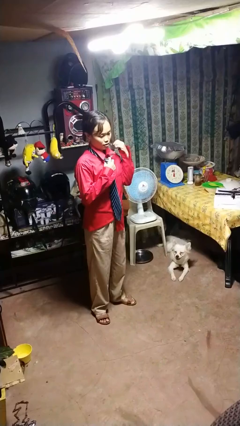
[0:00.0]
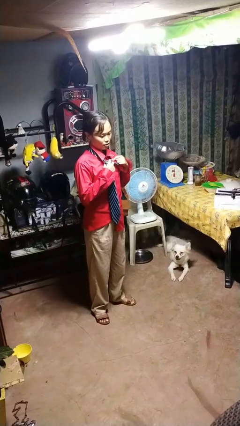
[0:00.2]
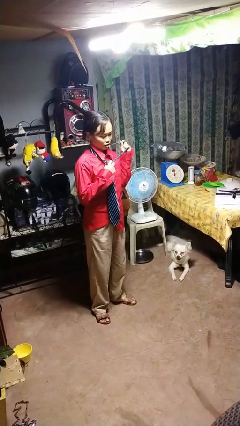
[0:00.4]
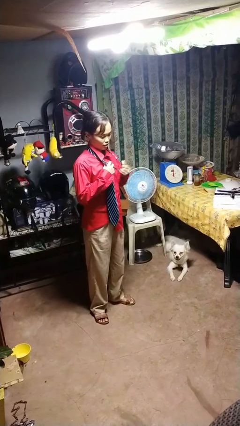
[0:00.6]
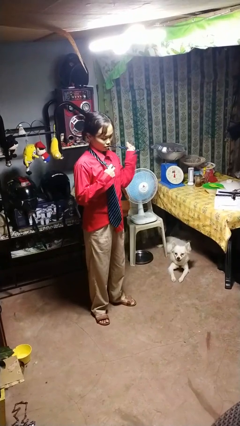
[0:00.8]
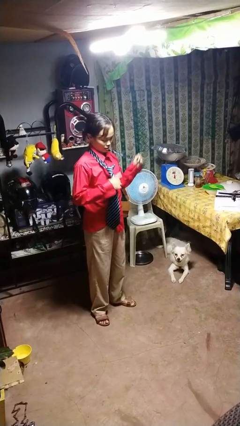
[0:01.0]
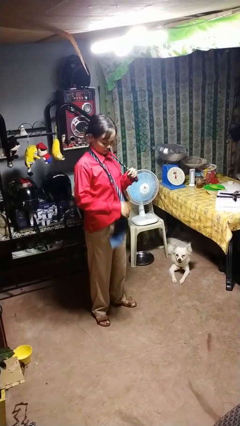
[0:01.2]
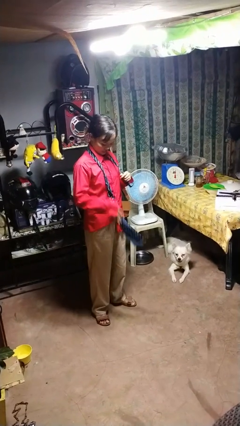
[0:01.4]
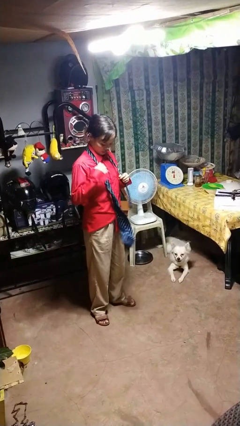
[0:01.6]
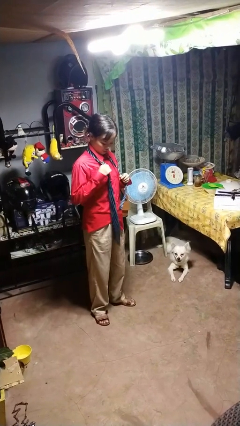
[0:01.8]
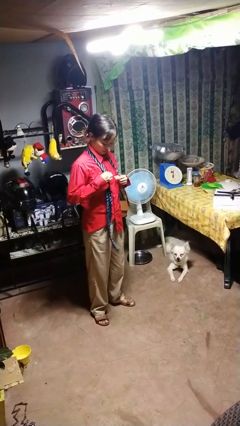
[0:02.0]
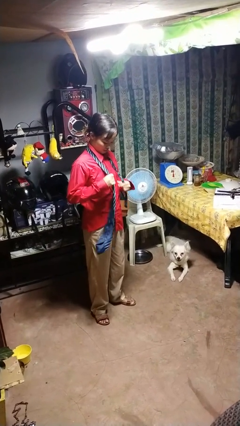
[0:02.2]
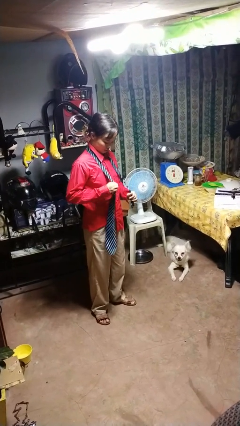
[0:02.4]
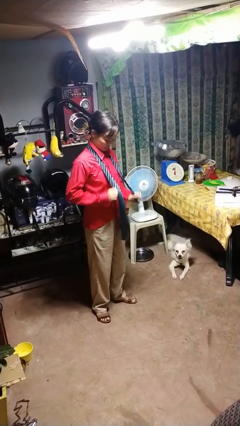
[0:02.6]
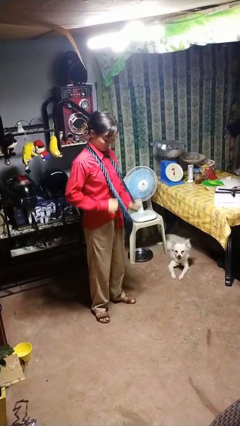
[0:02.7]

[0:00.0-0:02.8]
person takes off necktie

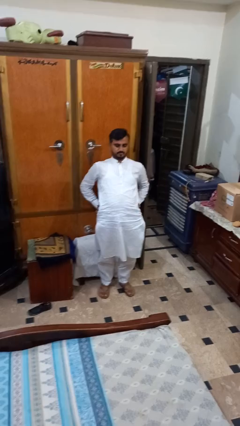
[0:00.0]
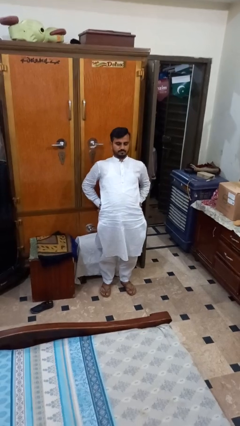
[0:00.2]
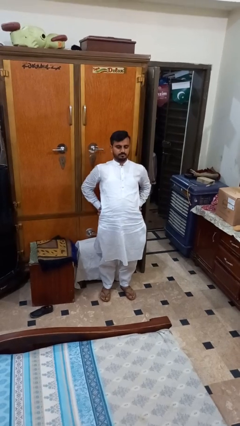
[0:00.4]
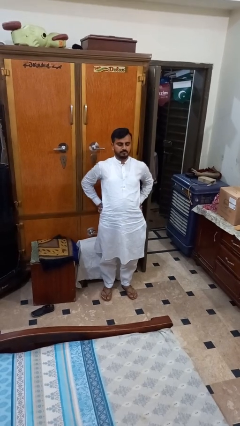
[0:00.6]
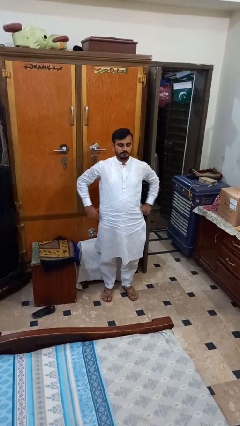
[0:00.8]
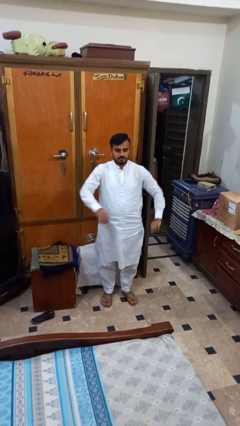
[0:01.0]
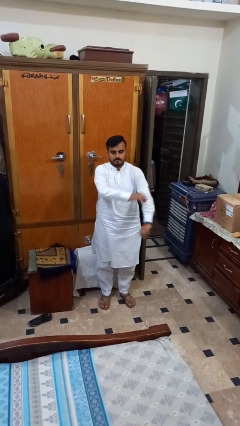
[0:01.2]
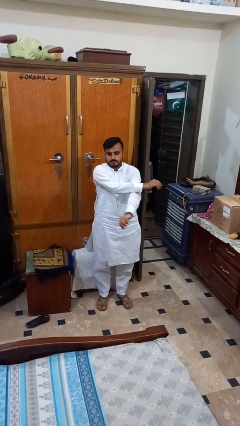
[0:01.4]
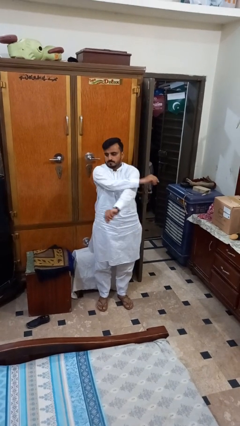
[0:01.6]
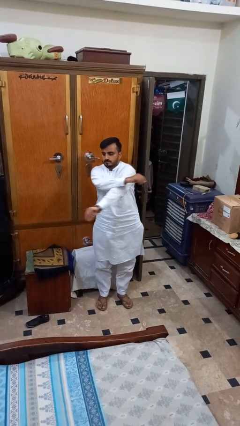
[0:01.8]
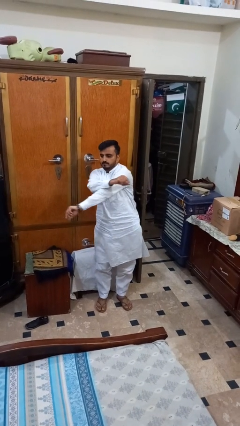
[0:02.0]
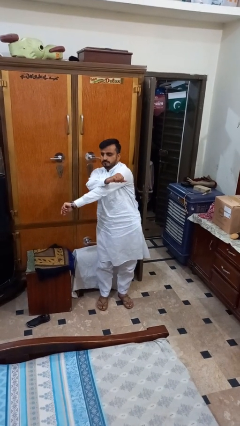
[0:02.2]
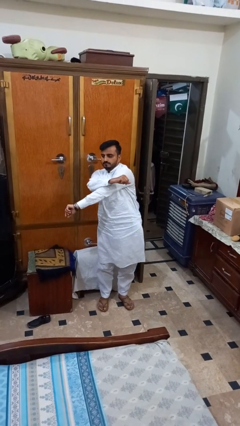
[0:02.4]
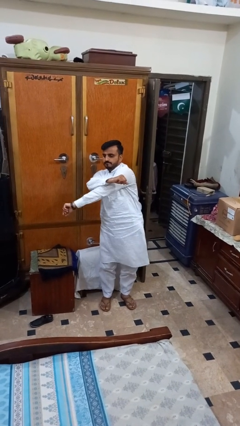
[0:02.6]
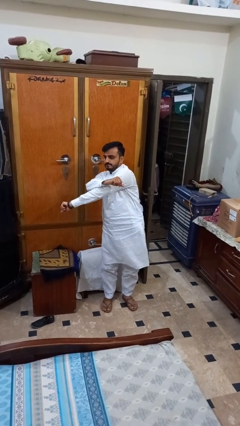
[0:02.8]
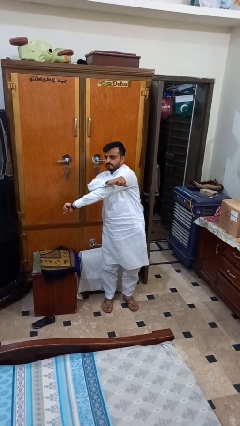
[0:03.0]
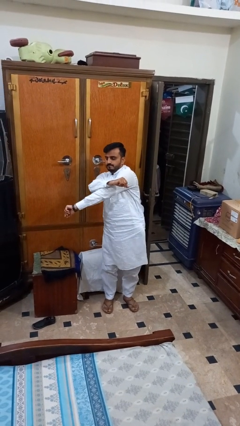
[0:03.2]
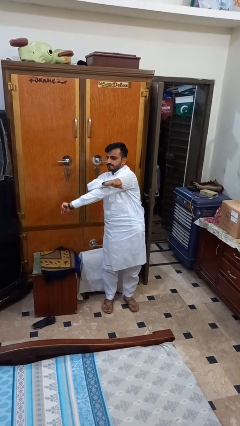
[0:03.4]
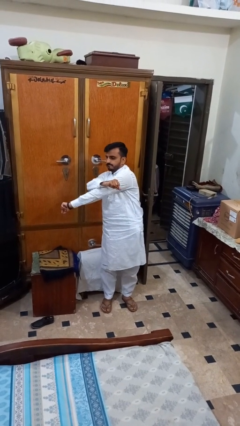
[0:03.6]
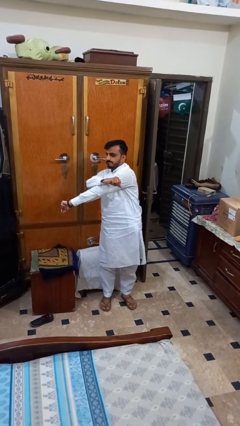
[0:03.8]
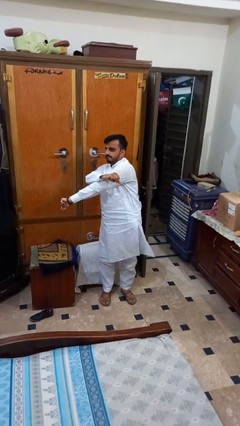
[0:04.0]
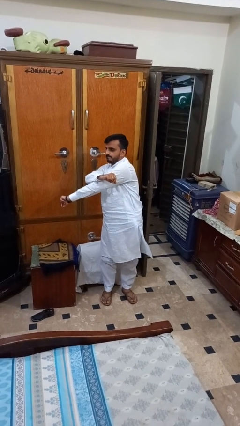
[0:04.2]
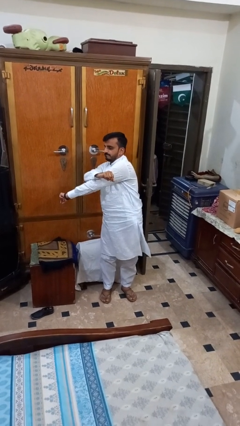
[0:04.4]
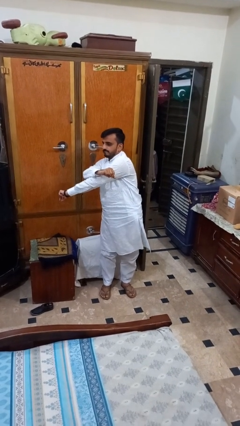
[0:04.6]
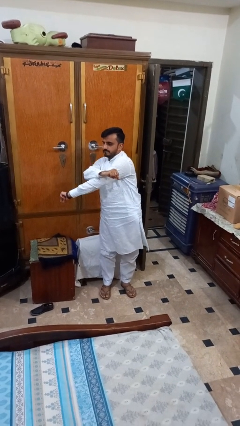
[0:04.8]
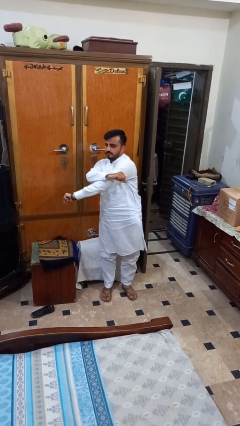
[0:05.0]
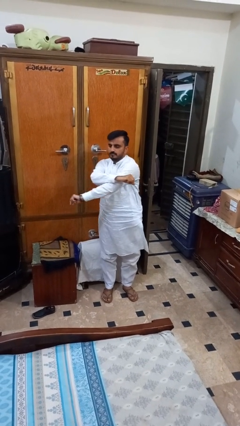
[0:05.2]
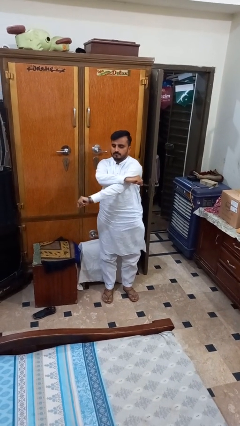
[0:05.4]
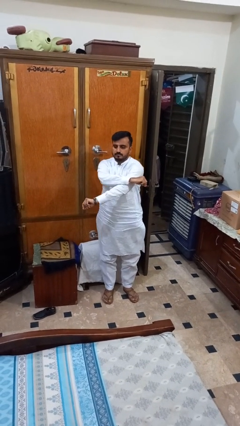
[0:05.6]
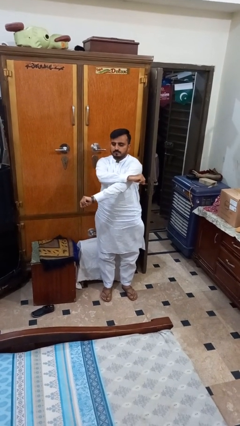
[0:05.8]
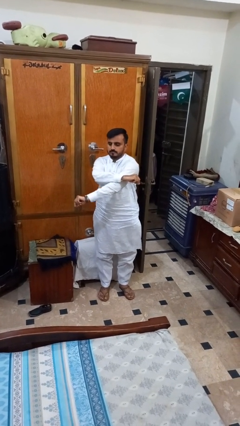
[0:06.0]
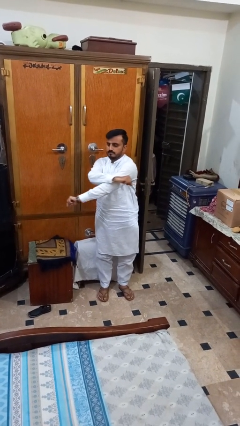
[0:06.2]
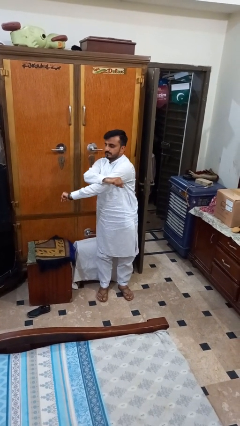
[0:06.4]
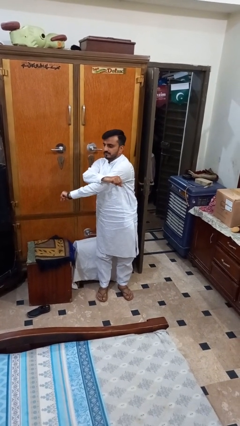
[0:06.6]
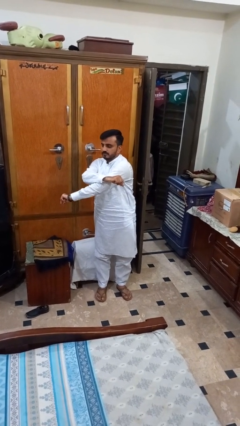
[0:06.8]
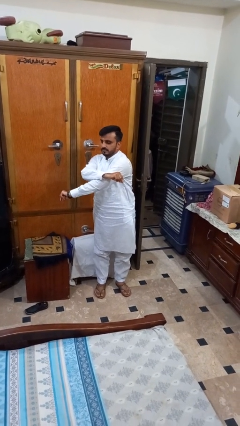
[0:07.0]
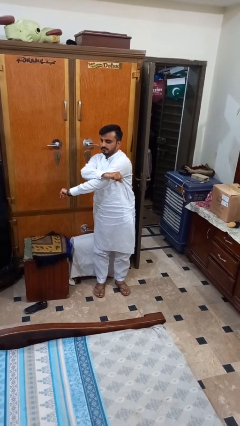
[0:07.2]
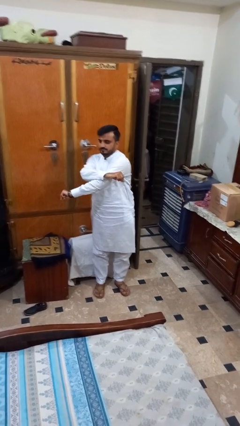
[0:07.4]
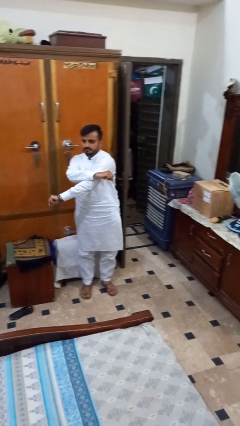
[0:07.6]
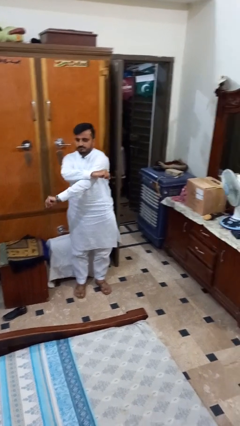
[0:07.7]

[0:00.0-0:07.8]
person stretches arms to side

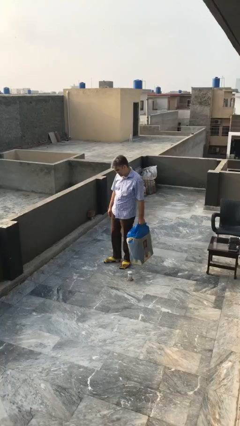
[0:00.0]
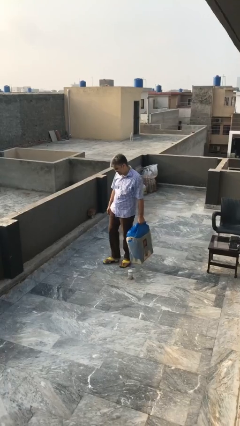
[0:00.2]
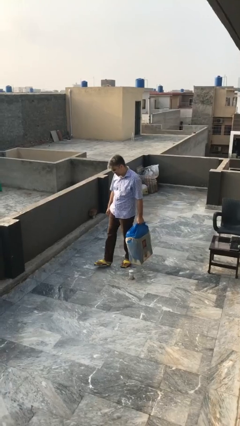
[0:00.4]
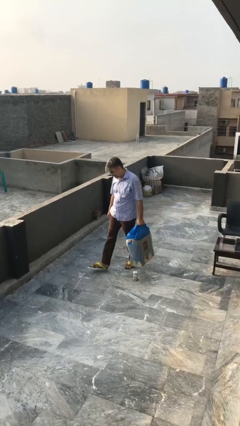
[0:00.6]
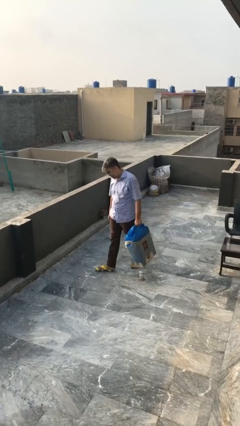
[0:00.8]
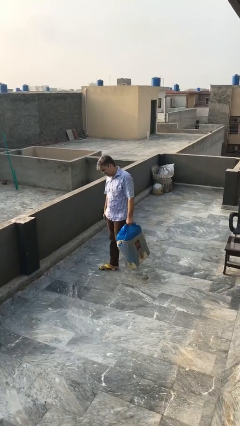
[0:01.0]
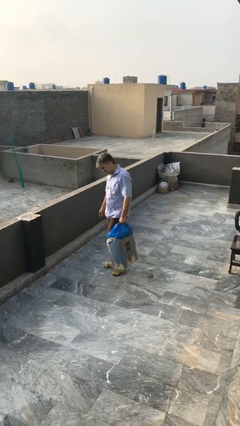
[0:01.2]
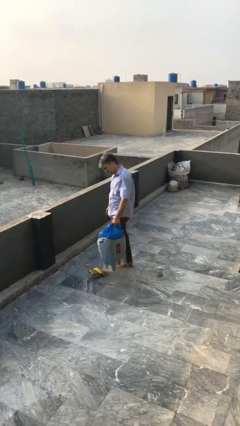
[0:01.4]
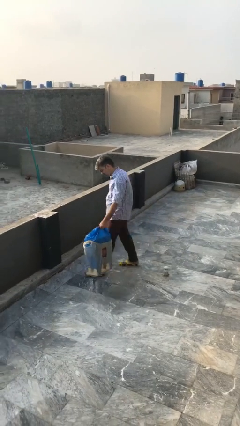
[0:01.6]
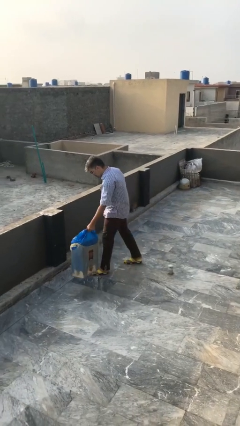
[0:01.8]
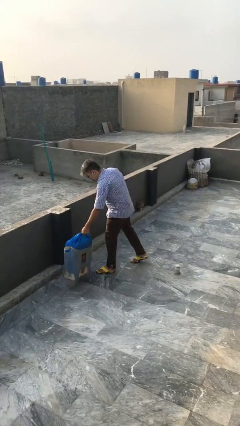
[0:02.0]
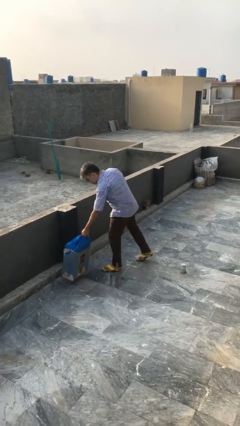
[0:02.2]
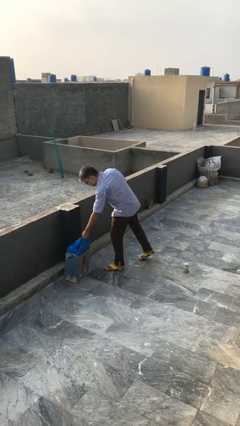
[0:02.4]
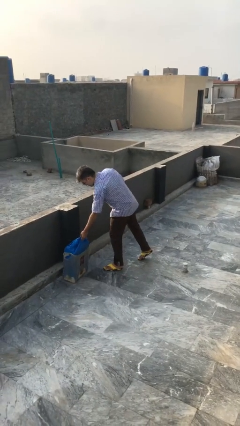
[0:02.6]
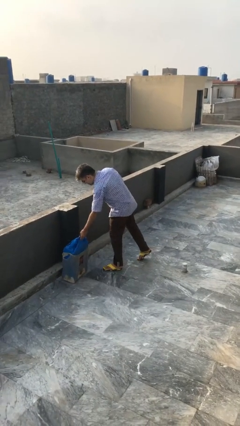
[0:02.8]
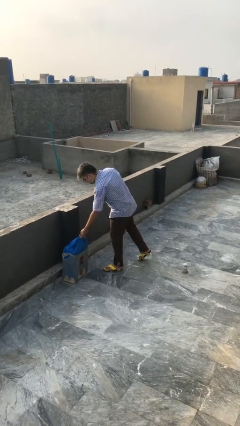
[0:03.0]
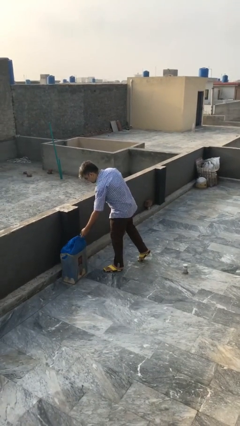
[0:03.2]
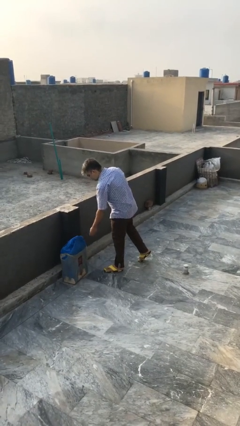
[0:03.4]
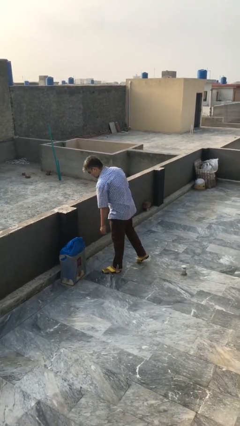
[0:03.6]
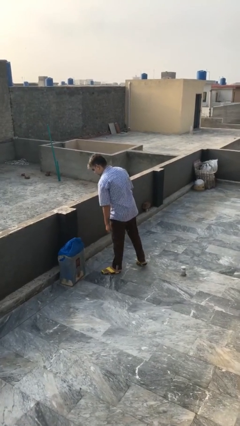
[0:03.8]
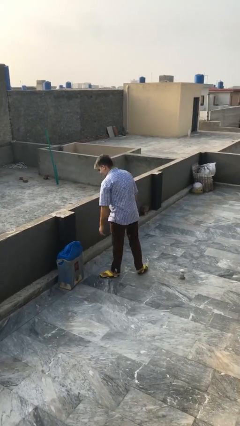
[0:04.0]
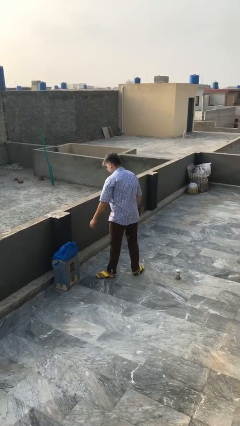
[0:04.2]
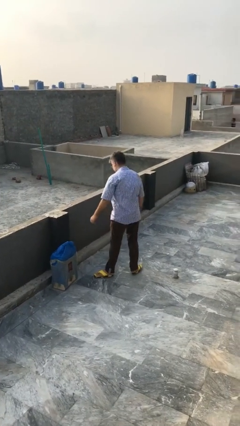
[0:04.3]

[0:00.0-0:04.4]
person puts down object on floor

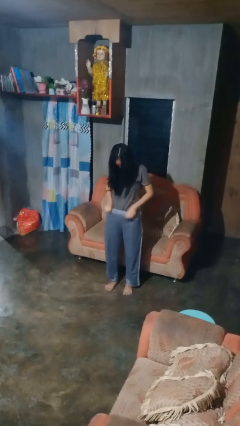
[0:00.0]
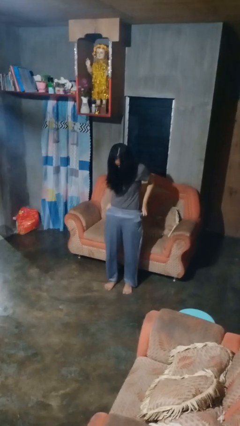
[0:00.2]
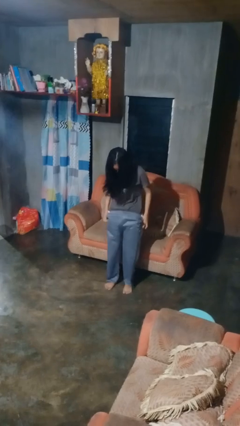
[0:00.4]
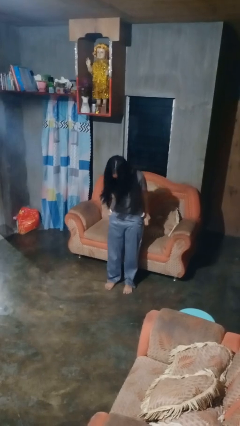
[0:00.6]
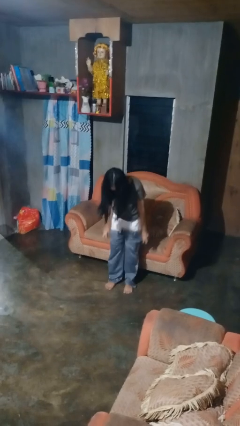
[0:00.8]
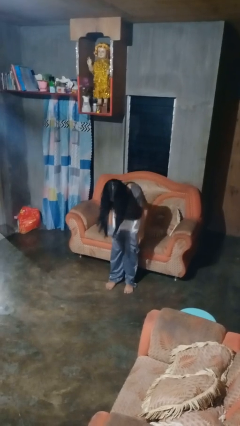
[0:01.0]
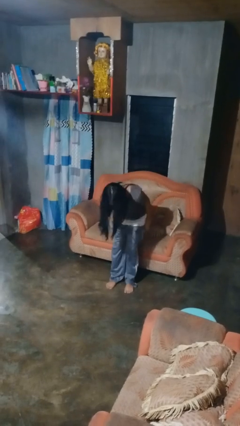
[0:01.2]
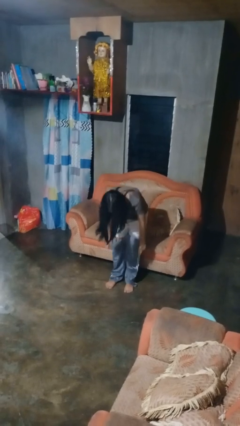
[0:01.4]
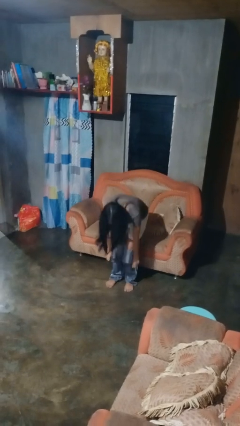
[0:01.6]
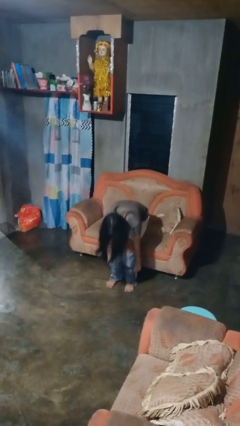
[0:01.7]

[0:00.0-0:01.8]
person takes off pants

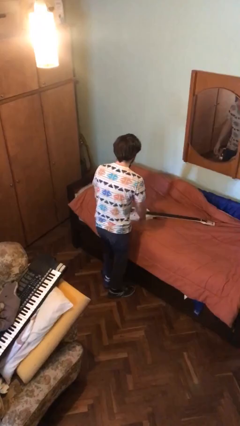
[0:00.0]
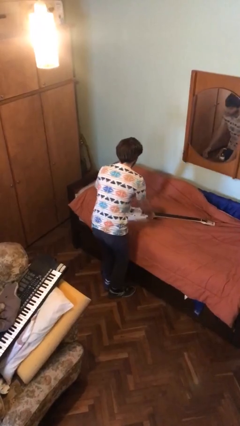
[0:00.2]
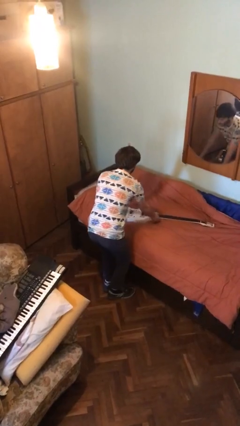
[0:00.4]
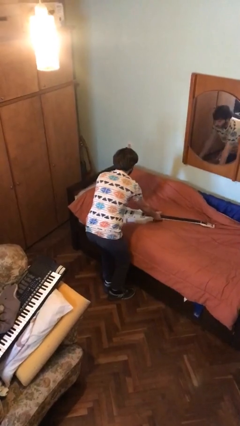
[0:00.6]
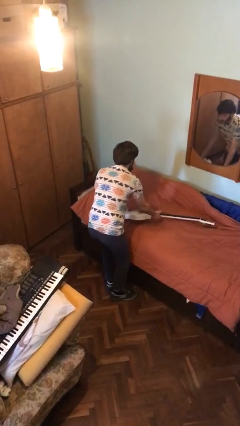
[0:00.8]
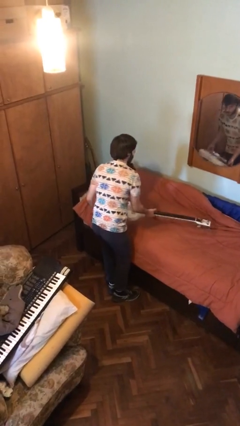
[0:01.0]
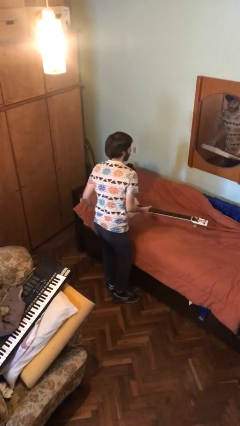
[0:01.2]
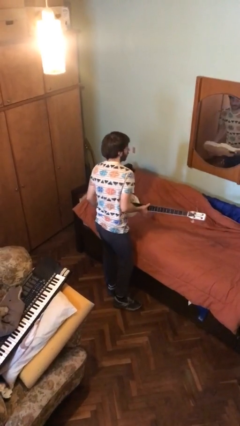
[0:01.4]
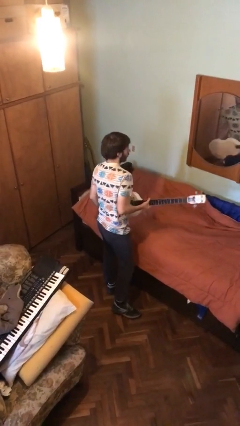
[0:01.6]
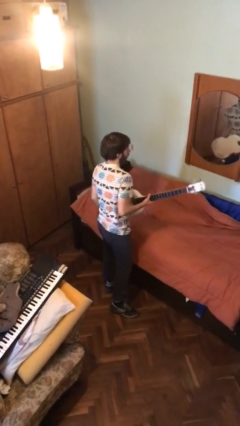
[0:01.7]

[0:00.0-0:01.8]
person picks up object from bed
